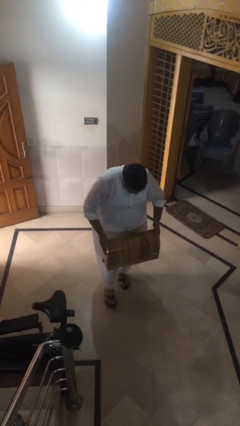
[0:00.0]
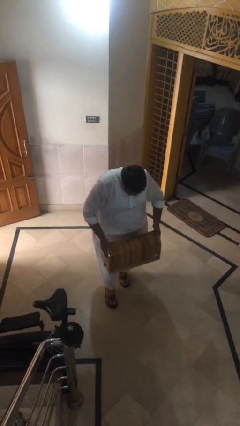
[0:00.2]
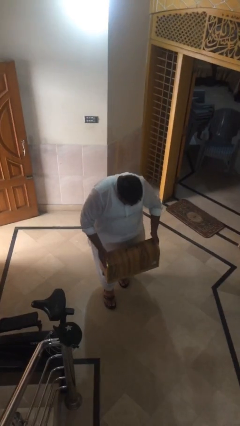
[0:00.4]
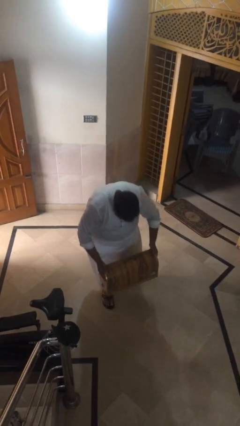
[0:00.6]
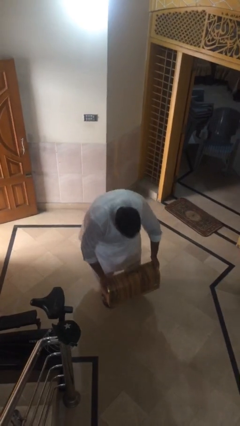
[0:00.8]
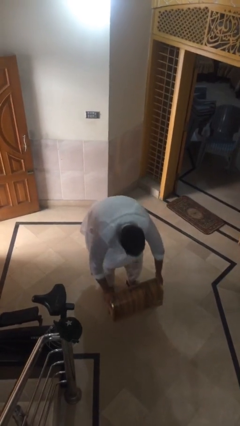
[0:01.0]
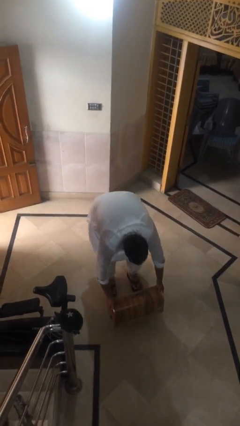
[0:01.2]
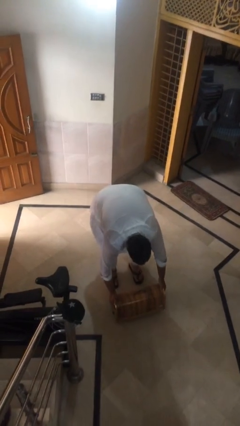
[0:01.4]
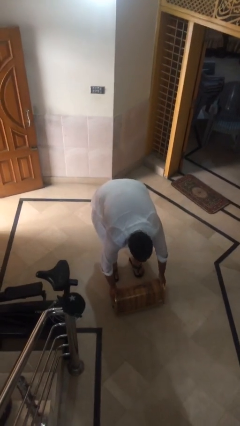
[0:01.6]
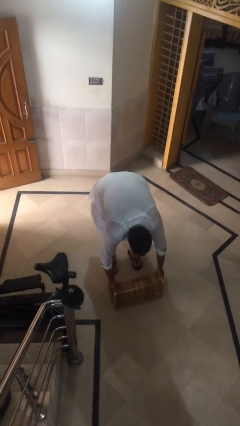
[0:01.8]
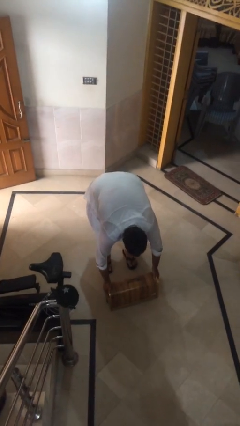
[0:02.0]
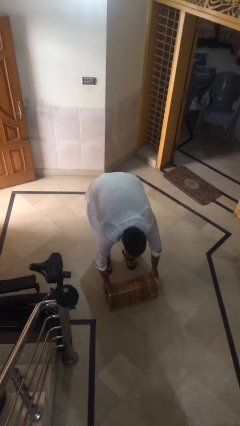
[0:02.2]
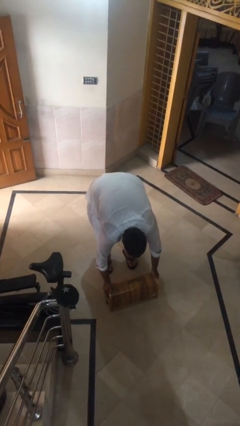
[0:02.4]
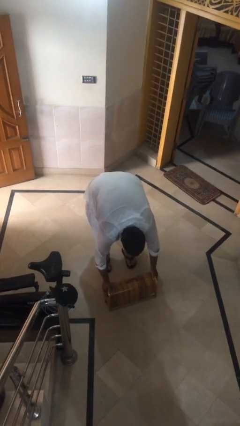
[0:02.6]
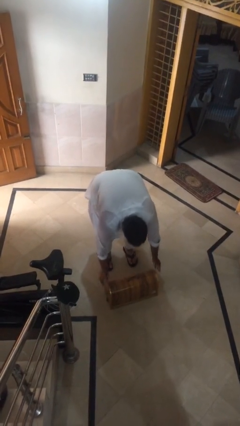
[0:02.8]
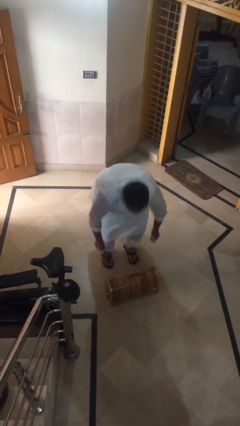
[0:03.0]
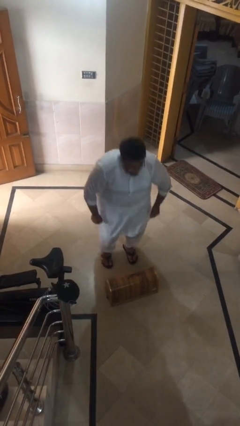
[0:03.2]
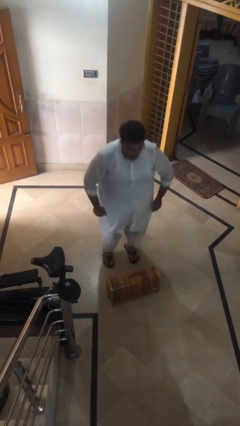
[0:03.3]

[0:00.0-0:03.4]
person puts down object on floor

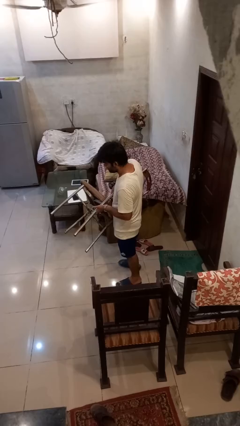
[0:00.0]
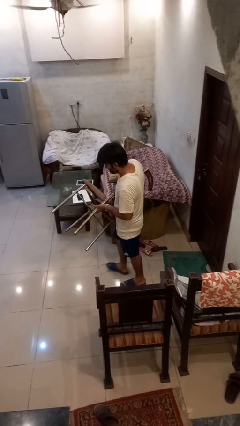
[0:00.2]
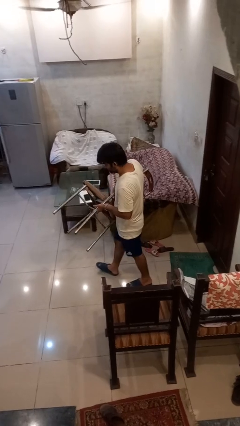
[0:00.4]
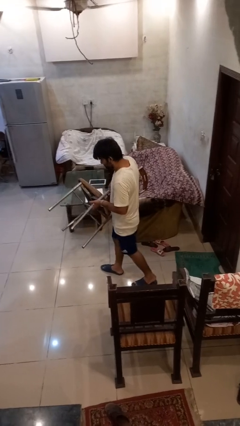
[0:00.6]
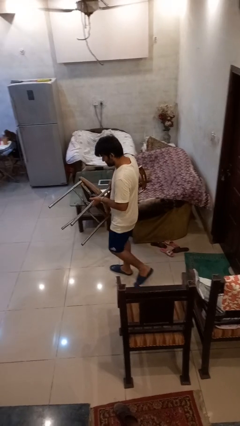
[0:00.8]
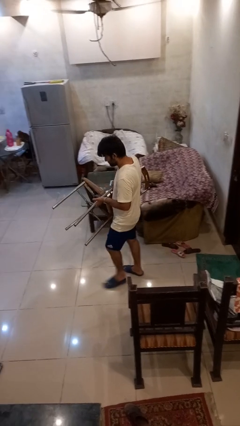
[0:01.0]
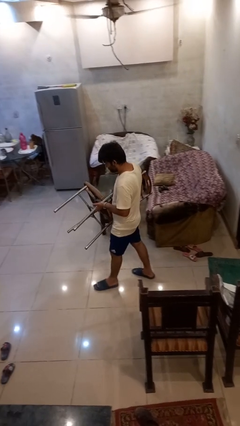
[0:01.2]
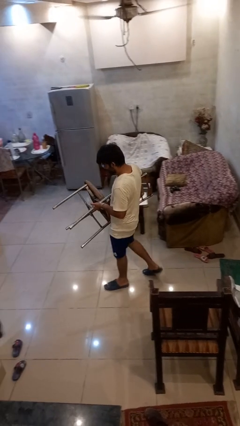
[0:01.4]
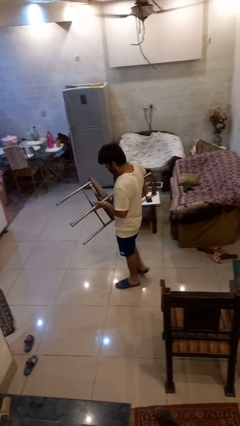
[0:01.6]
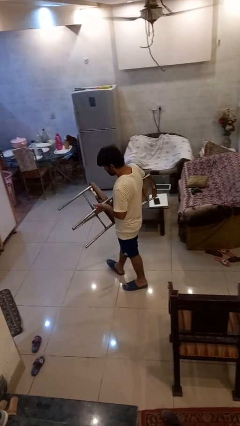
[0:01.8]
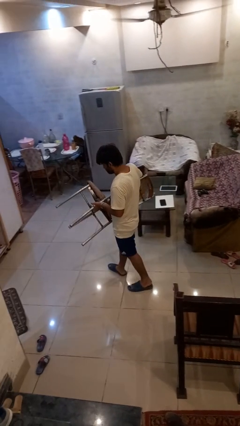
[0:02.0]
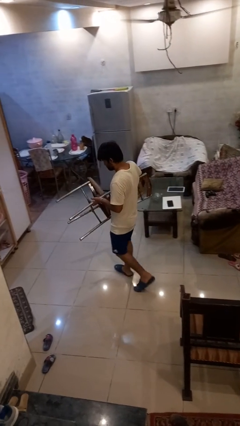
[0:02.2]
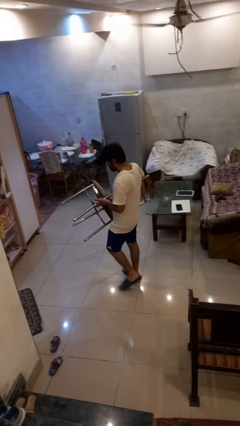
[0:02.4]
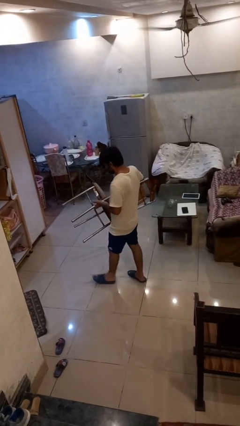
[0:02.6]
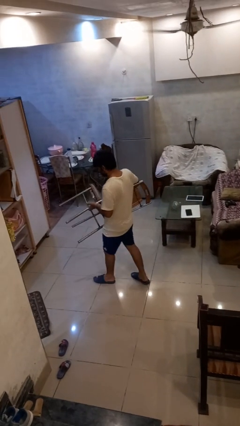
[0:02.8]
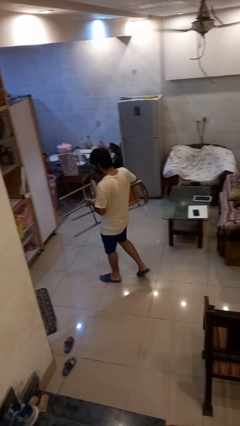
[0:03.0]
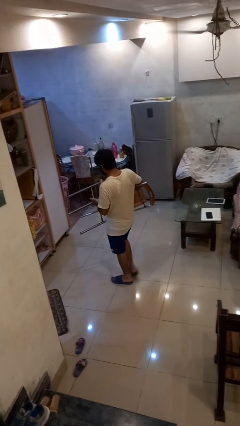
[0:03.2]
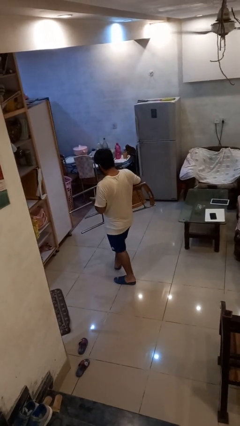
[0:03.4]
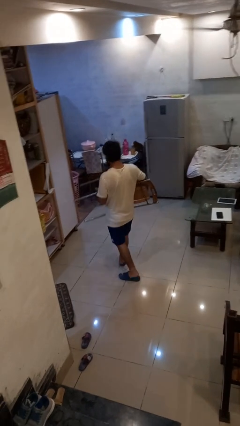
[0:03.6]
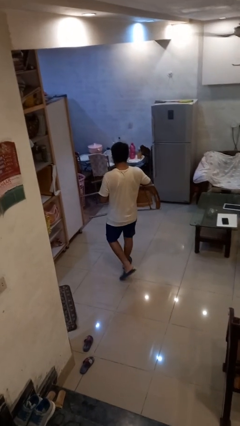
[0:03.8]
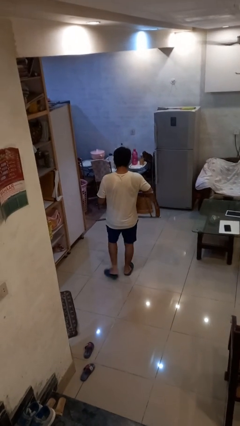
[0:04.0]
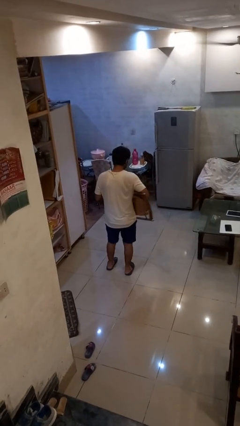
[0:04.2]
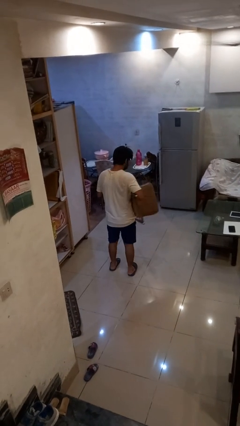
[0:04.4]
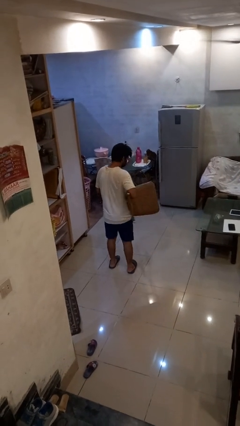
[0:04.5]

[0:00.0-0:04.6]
person carries furniture

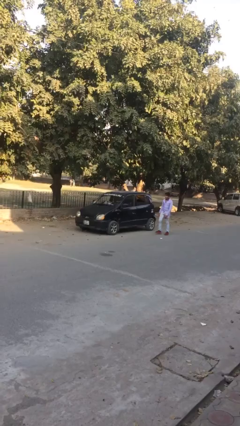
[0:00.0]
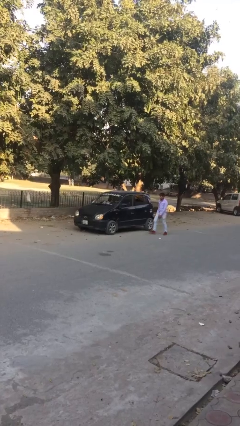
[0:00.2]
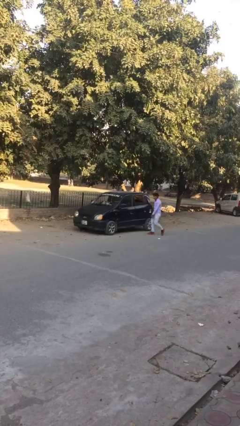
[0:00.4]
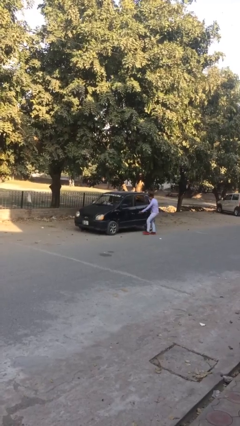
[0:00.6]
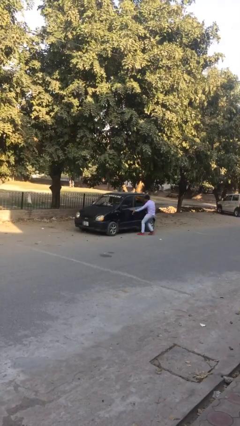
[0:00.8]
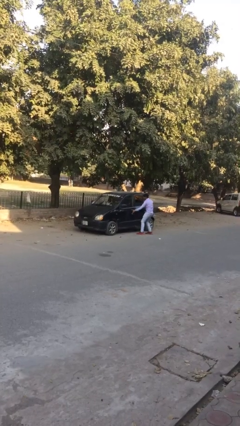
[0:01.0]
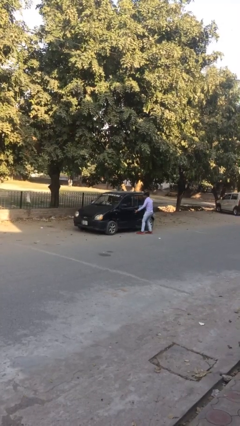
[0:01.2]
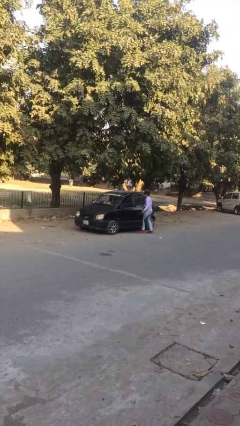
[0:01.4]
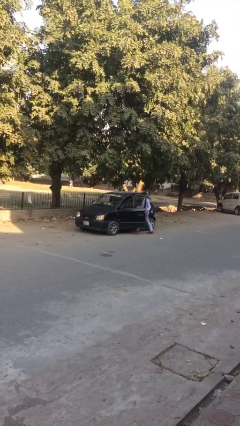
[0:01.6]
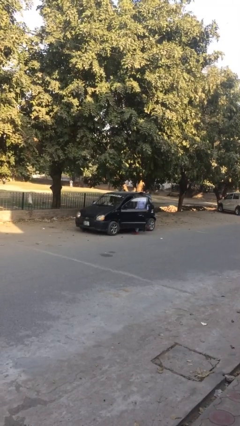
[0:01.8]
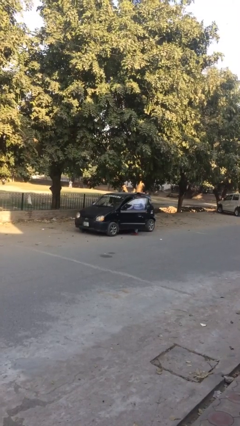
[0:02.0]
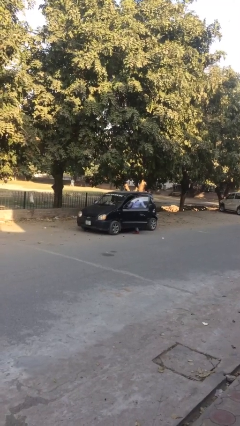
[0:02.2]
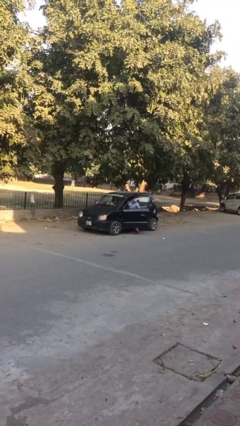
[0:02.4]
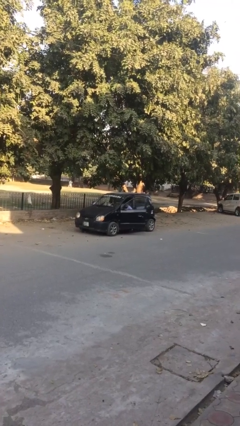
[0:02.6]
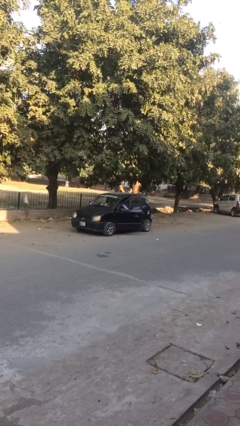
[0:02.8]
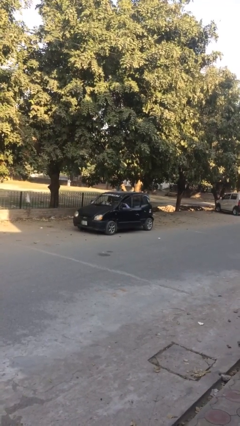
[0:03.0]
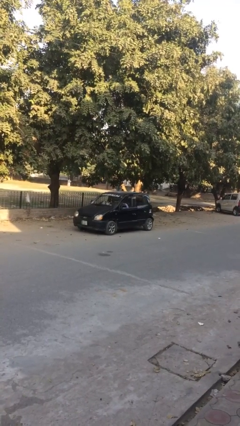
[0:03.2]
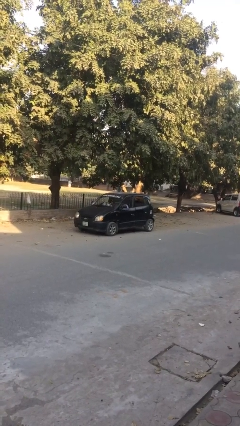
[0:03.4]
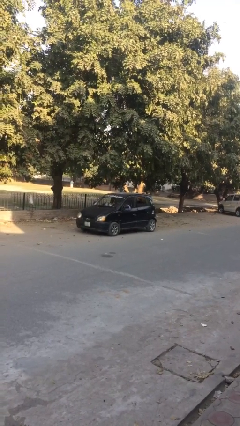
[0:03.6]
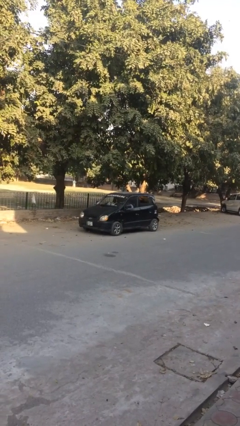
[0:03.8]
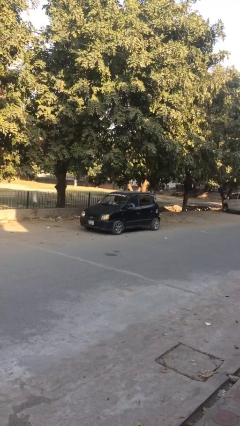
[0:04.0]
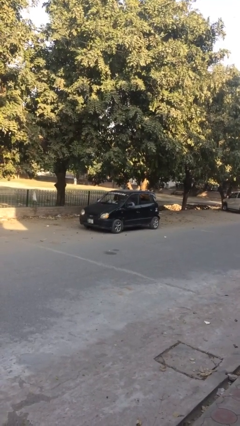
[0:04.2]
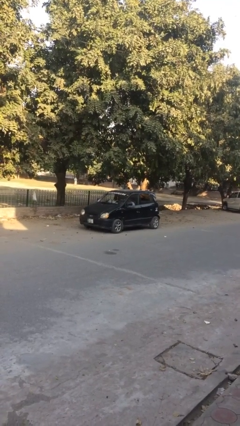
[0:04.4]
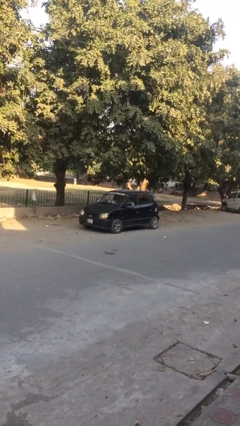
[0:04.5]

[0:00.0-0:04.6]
car picks up person

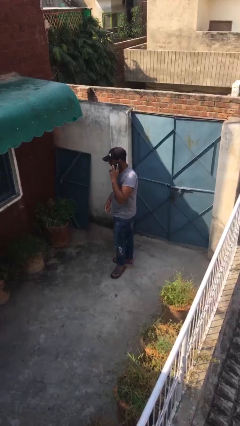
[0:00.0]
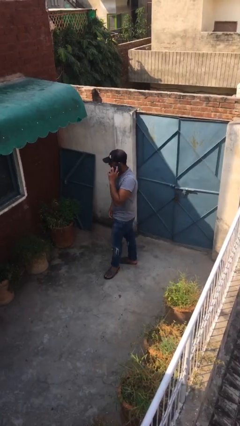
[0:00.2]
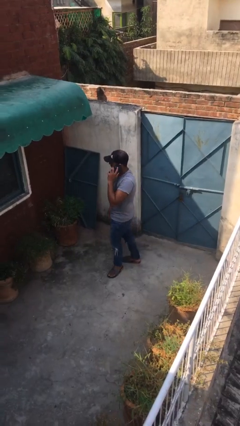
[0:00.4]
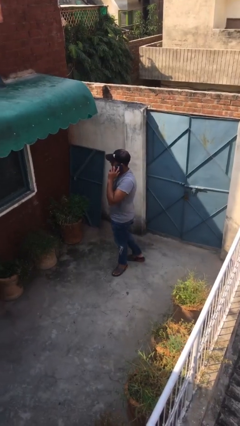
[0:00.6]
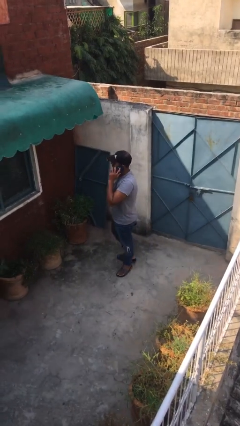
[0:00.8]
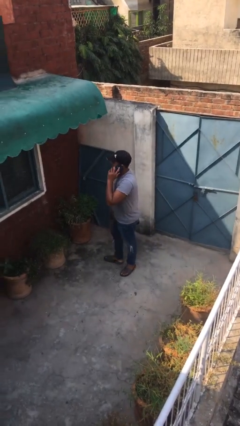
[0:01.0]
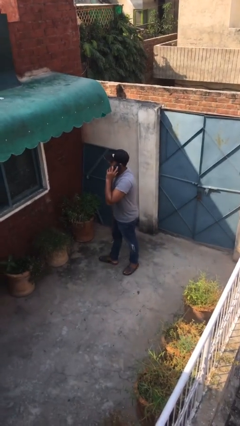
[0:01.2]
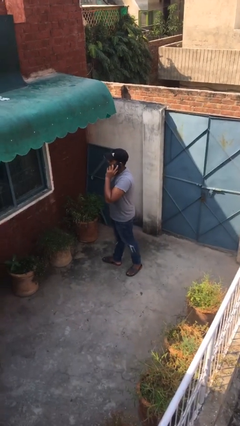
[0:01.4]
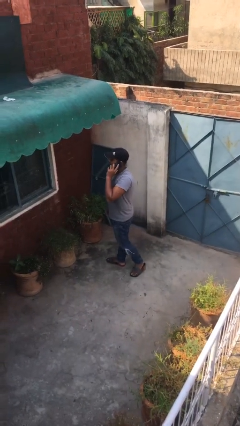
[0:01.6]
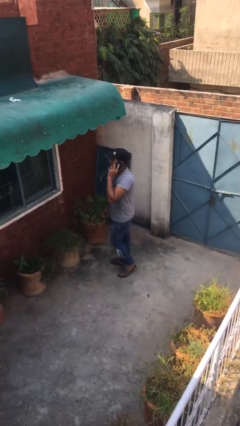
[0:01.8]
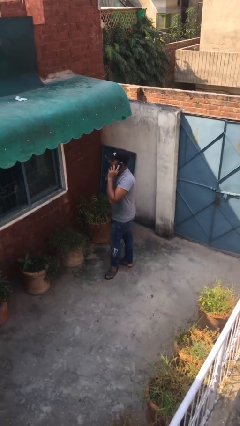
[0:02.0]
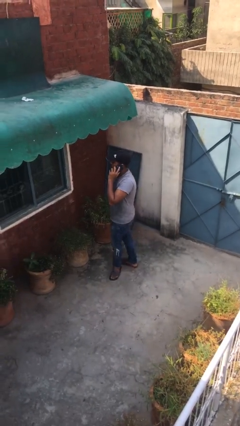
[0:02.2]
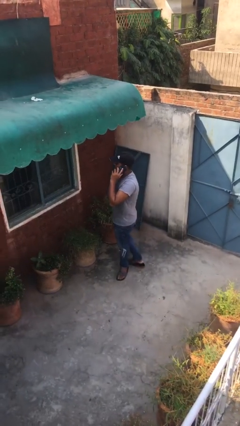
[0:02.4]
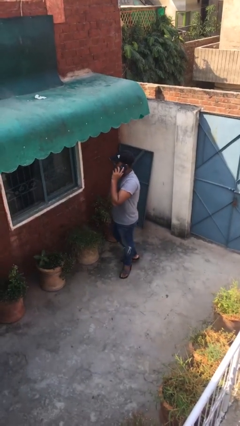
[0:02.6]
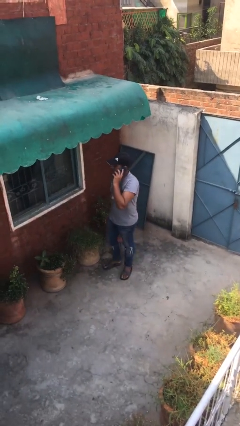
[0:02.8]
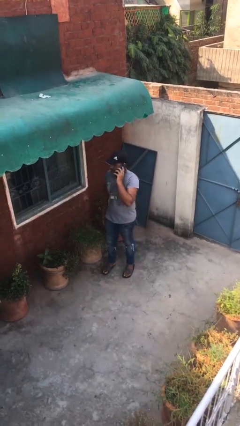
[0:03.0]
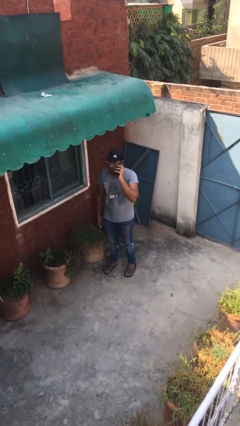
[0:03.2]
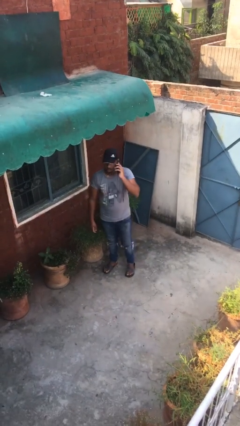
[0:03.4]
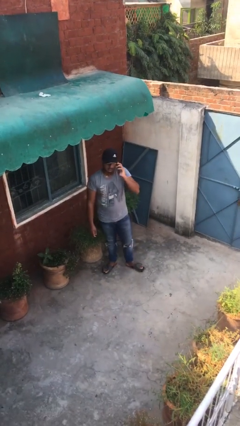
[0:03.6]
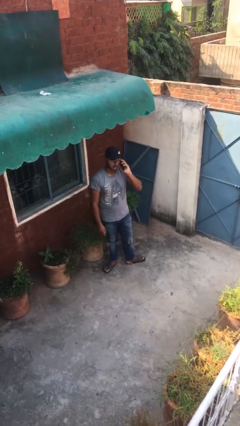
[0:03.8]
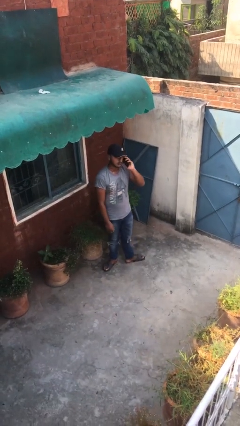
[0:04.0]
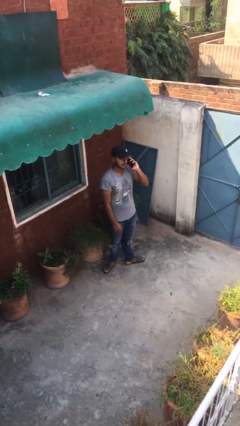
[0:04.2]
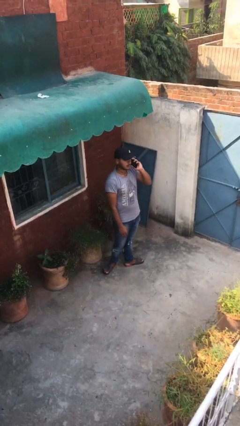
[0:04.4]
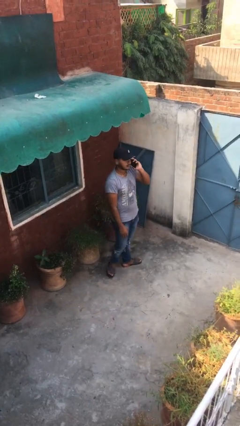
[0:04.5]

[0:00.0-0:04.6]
person talks on phone
